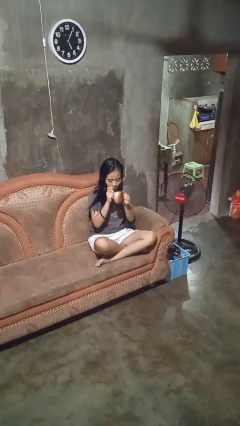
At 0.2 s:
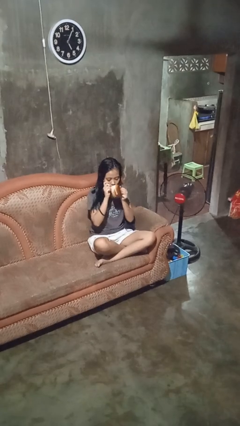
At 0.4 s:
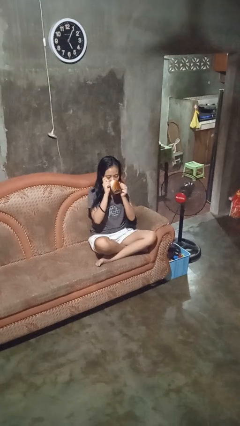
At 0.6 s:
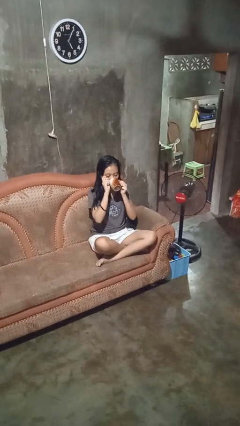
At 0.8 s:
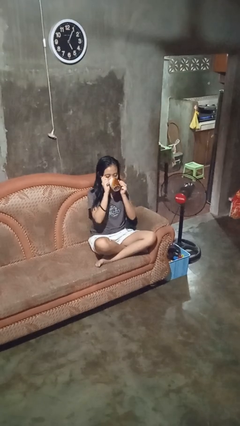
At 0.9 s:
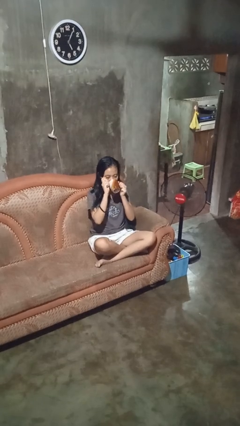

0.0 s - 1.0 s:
person drinks from mug

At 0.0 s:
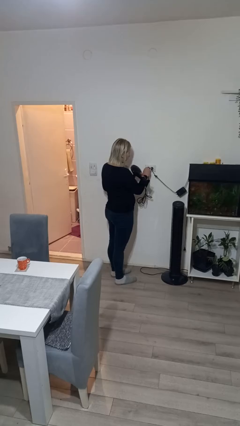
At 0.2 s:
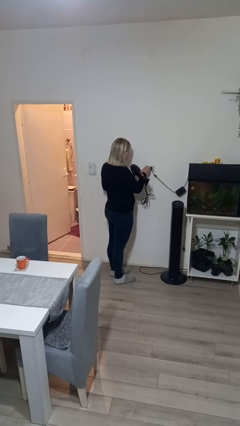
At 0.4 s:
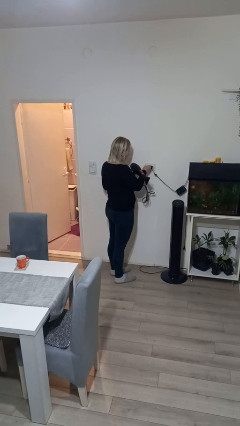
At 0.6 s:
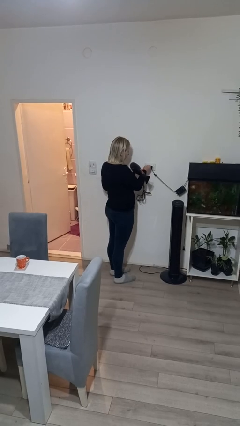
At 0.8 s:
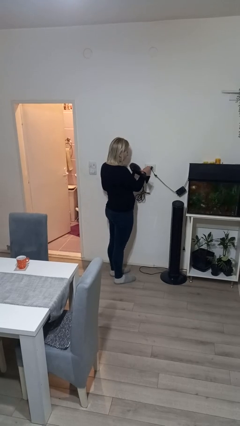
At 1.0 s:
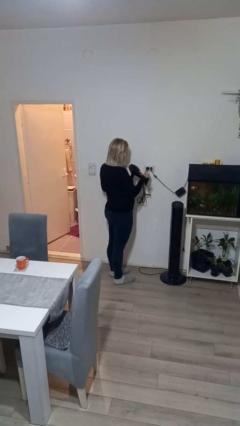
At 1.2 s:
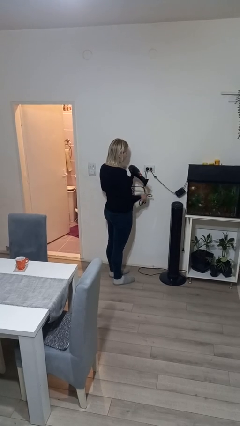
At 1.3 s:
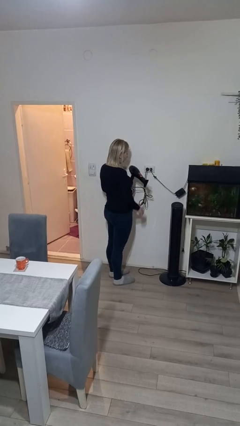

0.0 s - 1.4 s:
person plugs into electrical socket

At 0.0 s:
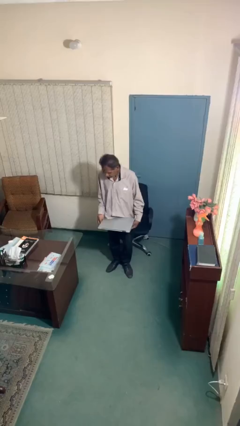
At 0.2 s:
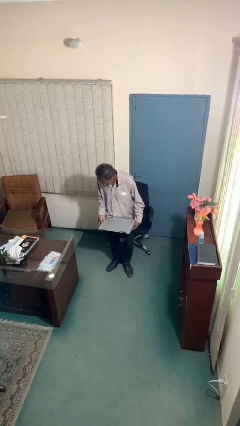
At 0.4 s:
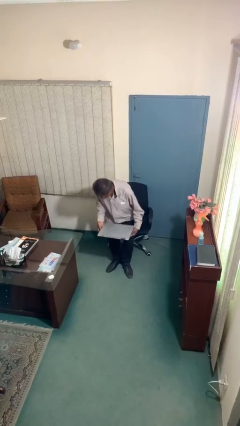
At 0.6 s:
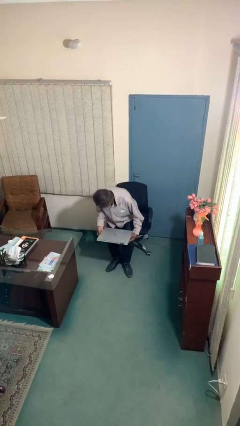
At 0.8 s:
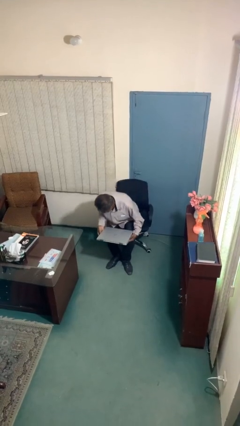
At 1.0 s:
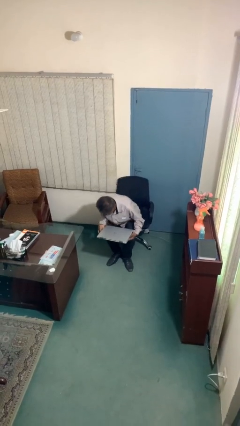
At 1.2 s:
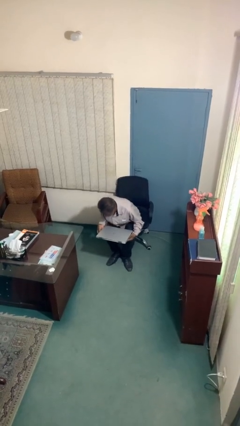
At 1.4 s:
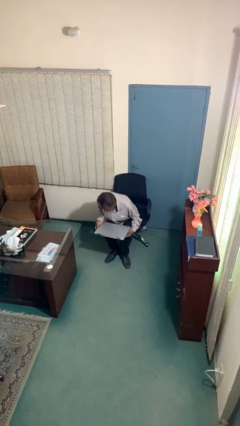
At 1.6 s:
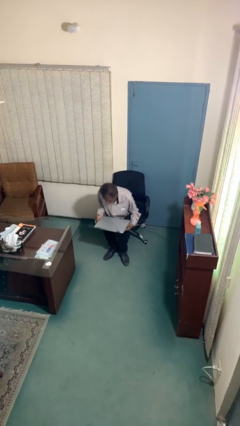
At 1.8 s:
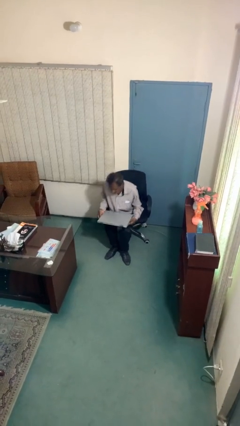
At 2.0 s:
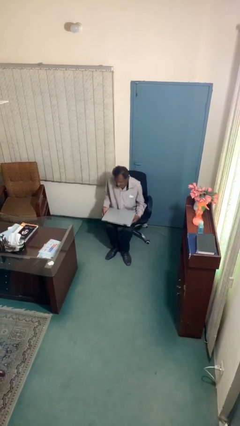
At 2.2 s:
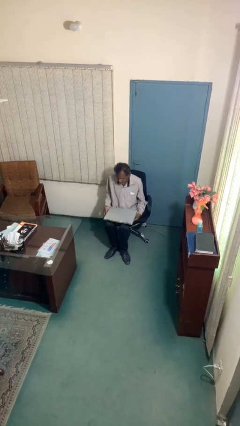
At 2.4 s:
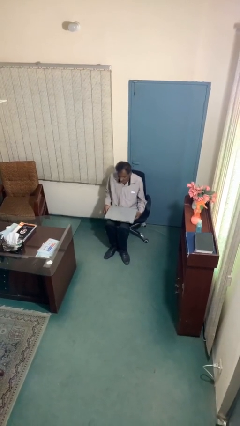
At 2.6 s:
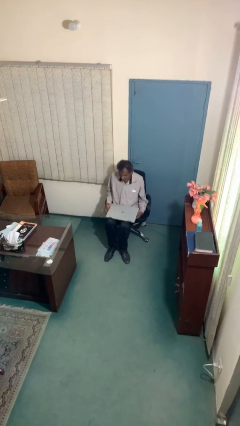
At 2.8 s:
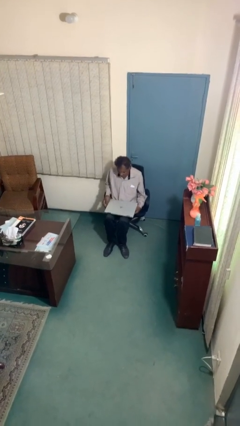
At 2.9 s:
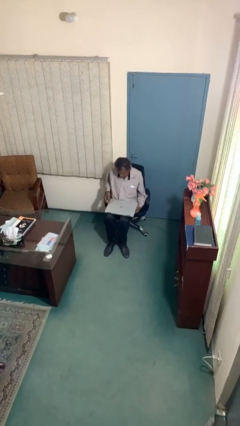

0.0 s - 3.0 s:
person sits down

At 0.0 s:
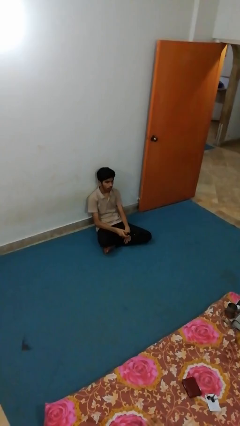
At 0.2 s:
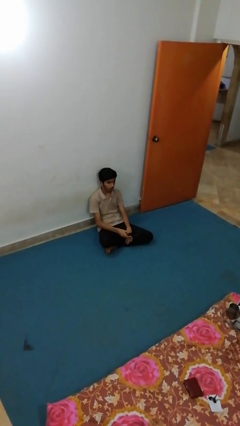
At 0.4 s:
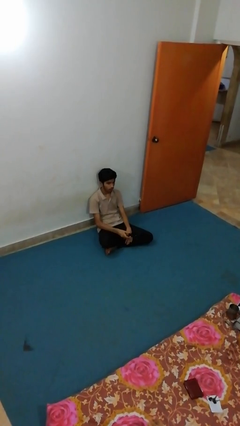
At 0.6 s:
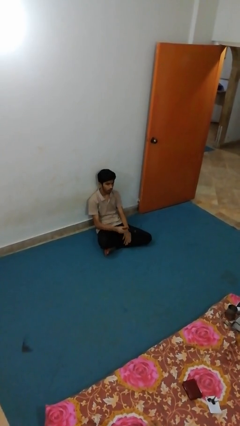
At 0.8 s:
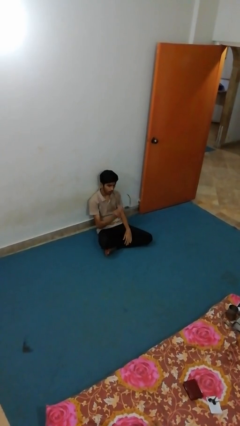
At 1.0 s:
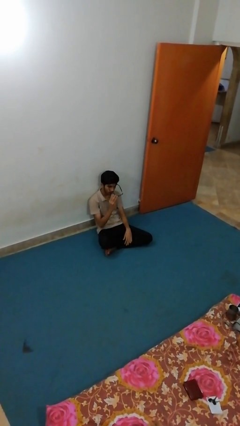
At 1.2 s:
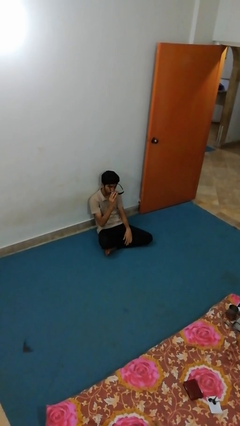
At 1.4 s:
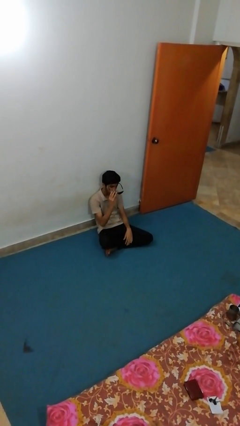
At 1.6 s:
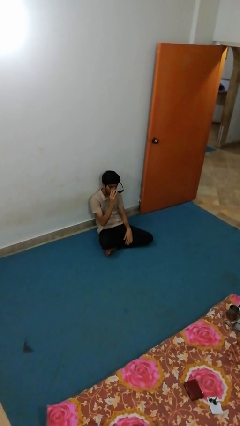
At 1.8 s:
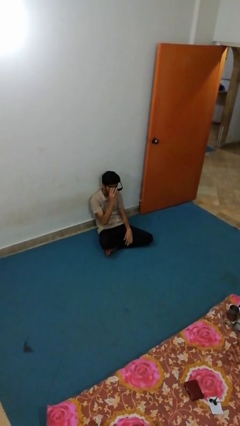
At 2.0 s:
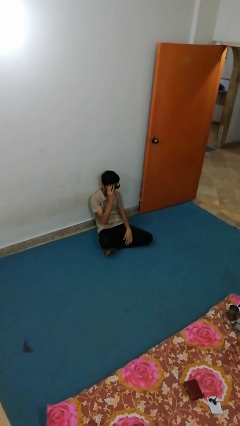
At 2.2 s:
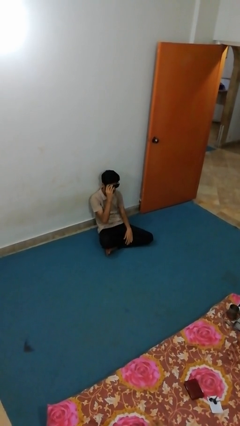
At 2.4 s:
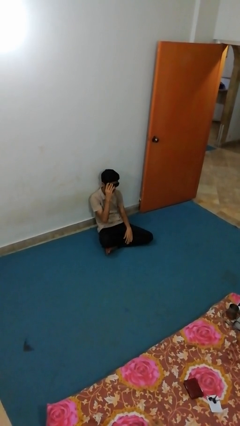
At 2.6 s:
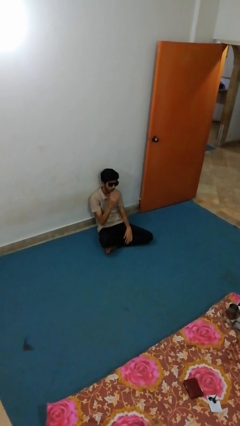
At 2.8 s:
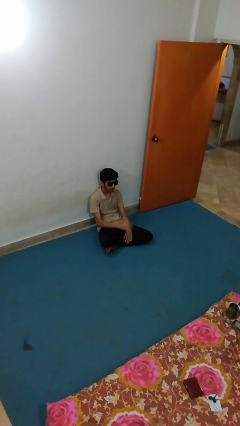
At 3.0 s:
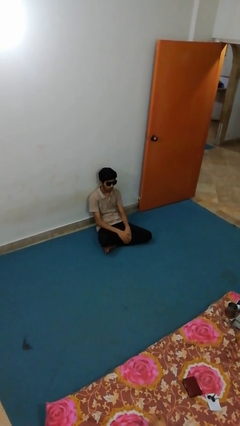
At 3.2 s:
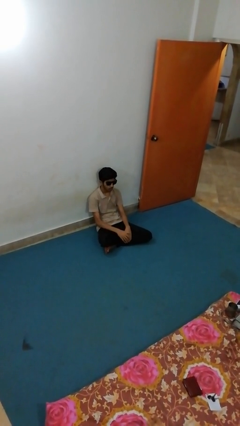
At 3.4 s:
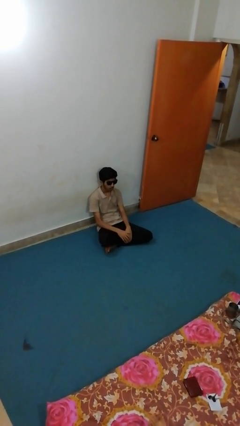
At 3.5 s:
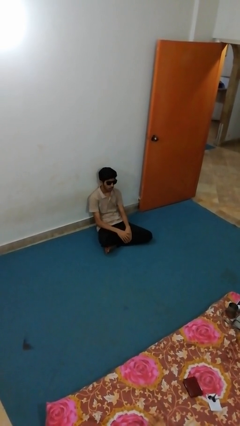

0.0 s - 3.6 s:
person puts on sunglasses

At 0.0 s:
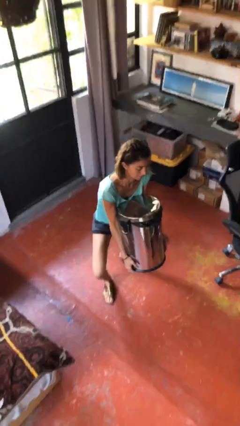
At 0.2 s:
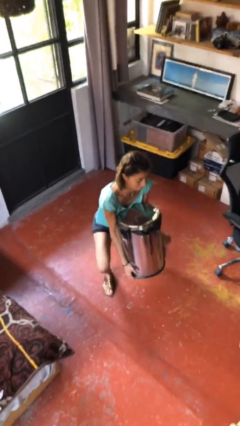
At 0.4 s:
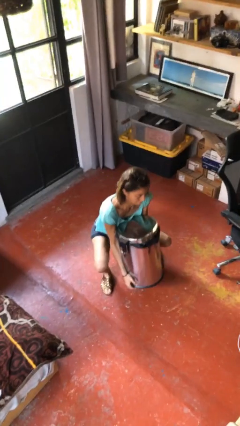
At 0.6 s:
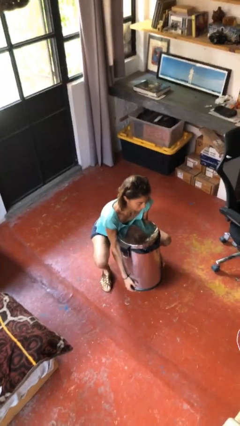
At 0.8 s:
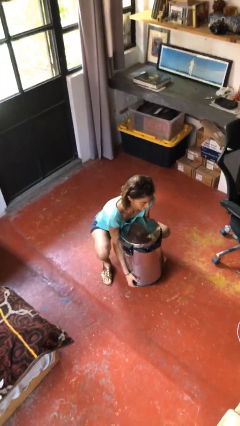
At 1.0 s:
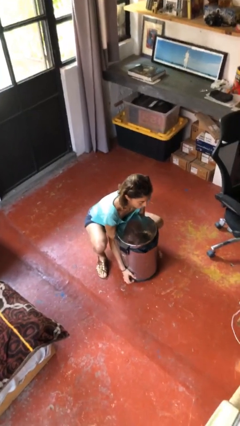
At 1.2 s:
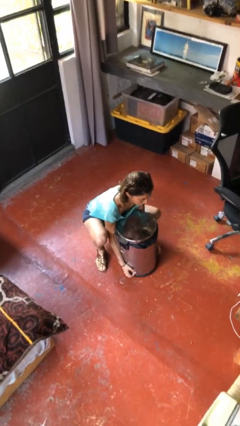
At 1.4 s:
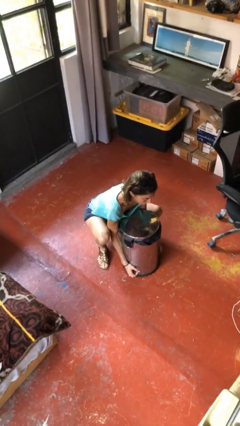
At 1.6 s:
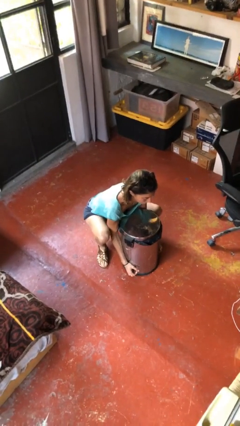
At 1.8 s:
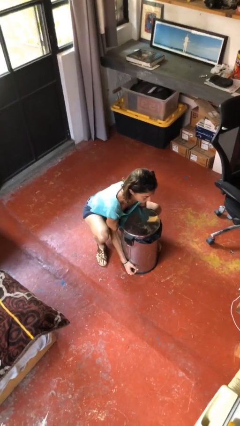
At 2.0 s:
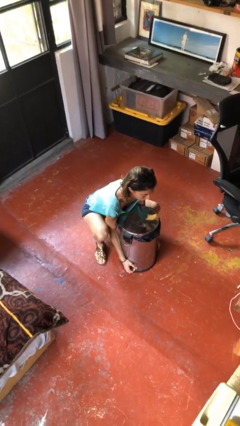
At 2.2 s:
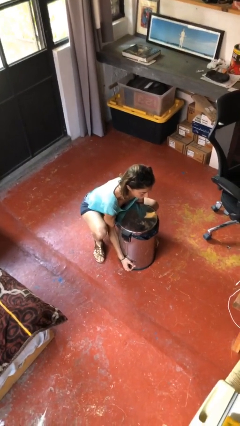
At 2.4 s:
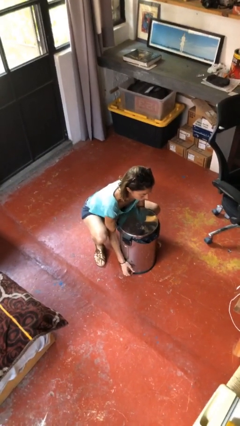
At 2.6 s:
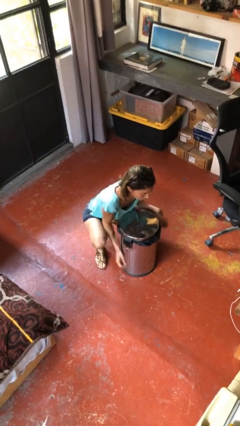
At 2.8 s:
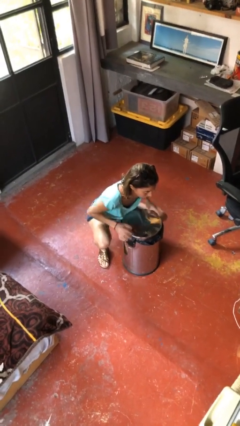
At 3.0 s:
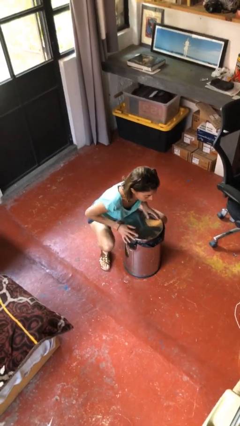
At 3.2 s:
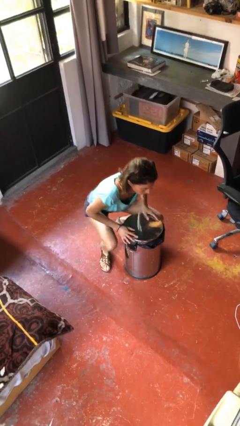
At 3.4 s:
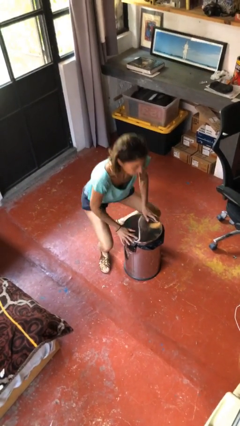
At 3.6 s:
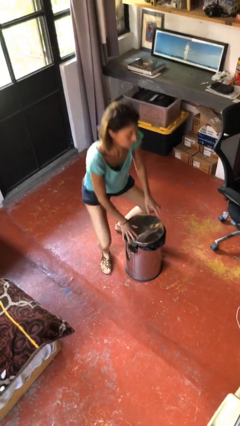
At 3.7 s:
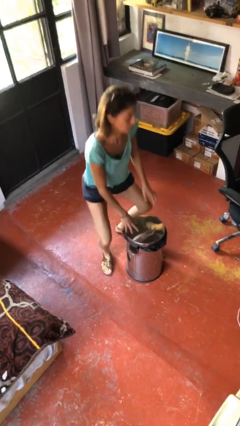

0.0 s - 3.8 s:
person puts down object on floor

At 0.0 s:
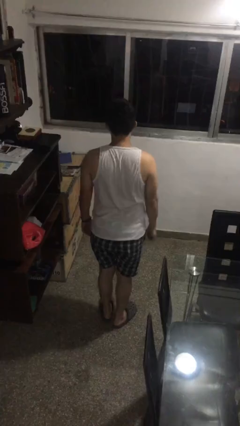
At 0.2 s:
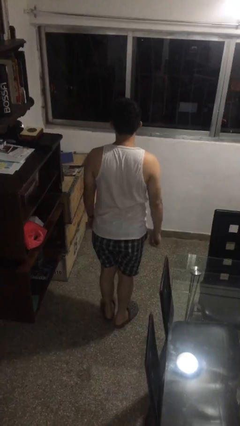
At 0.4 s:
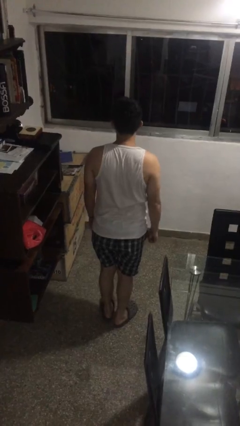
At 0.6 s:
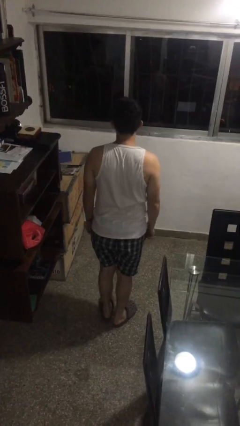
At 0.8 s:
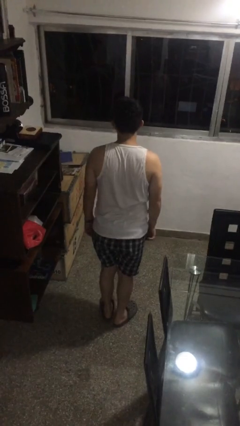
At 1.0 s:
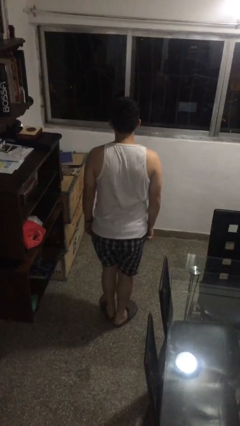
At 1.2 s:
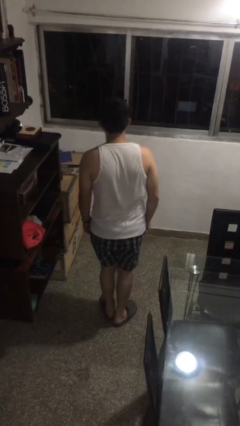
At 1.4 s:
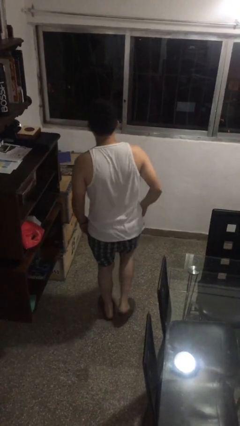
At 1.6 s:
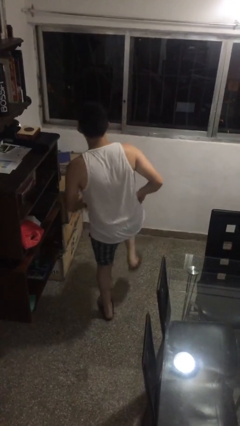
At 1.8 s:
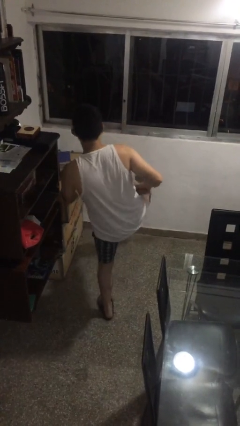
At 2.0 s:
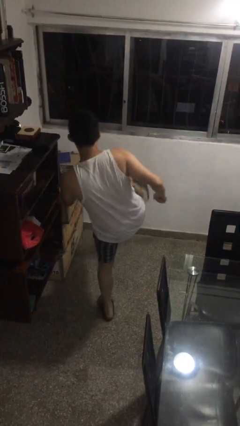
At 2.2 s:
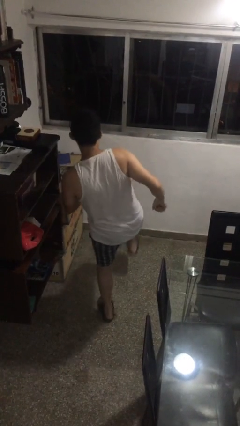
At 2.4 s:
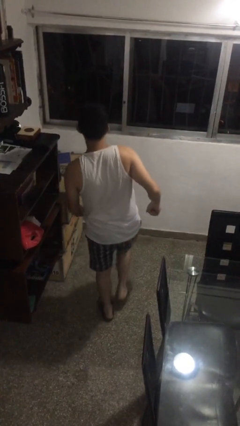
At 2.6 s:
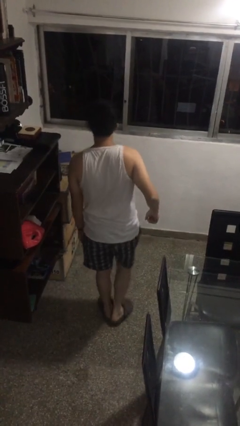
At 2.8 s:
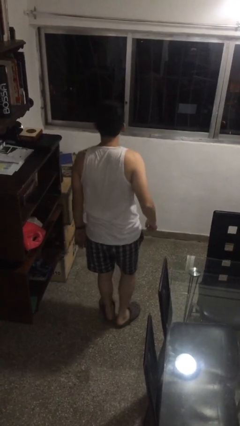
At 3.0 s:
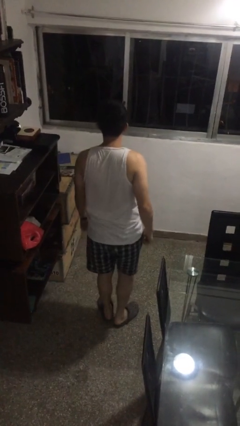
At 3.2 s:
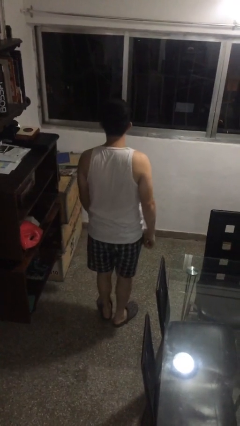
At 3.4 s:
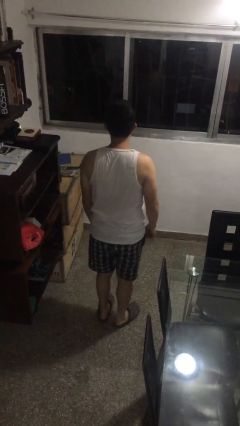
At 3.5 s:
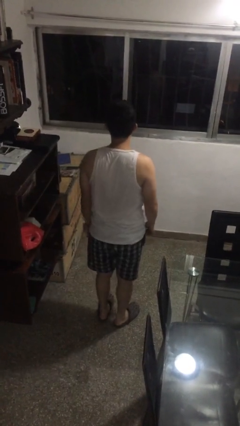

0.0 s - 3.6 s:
person karate kicks

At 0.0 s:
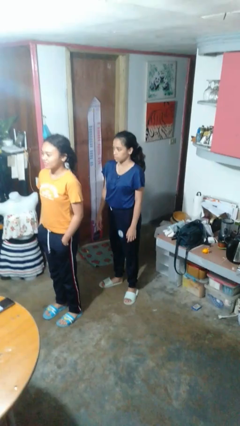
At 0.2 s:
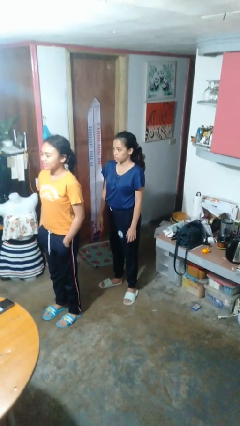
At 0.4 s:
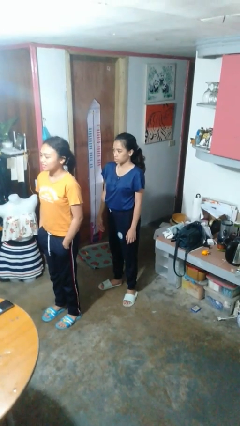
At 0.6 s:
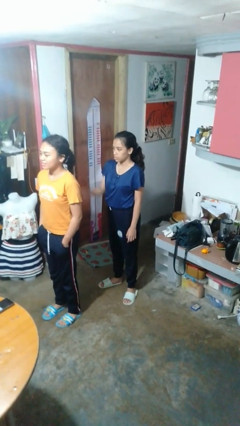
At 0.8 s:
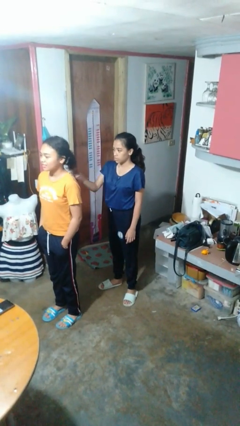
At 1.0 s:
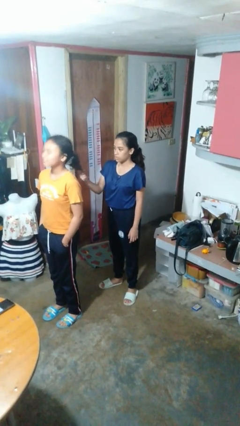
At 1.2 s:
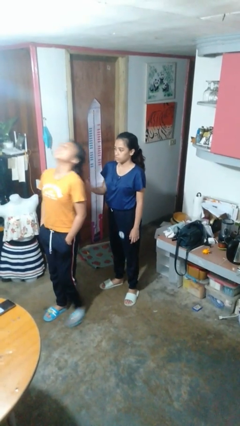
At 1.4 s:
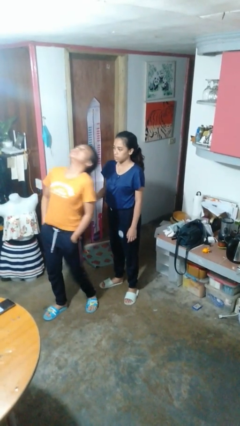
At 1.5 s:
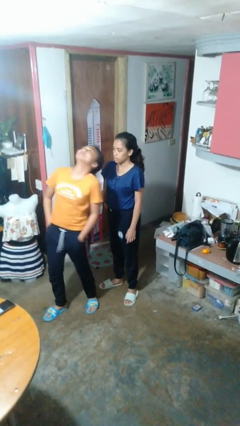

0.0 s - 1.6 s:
person grabs person by hair
